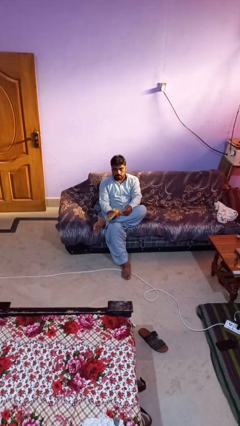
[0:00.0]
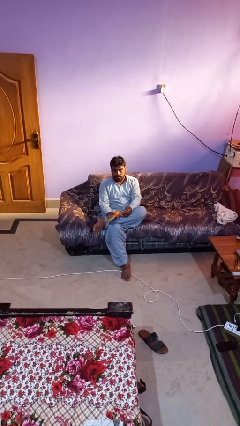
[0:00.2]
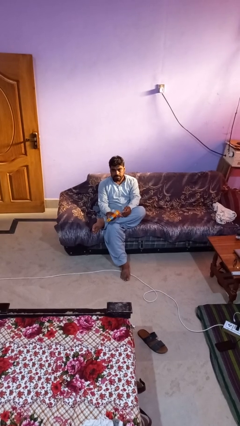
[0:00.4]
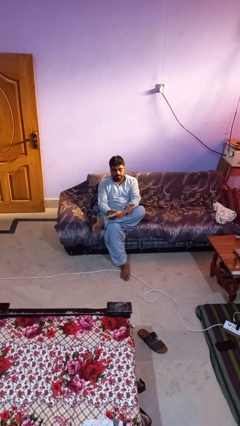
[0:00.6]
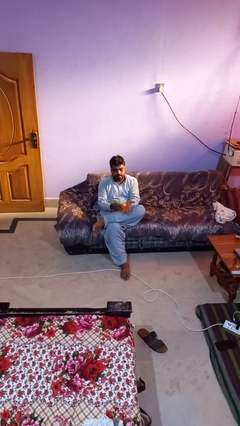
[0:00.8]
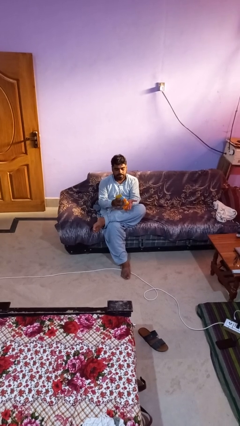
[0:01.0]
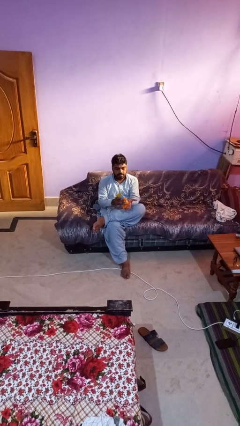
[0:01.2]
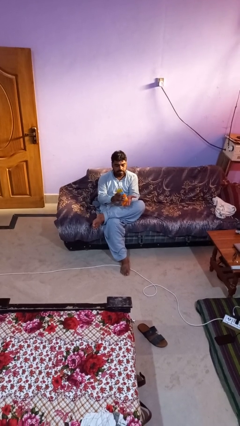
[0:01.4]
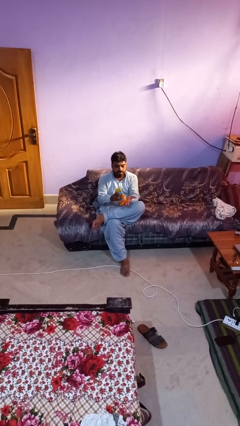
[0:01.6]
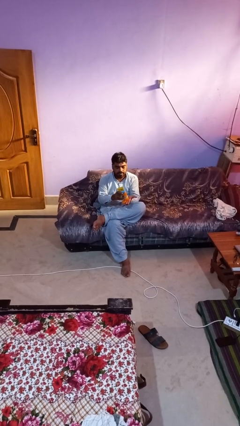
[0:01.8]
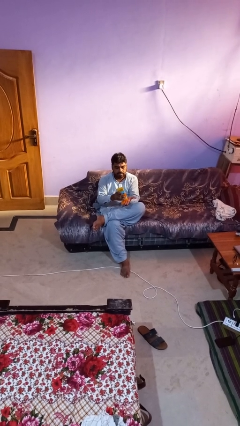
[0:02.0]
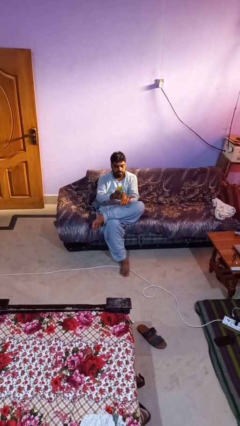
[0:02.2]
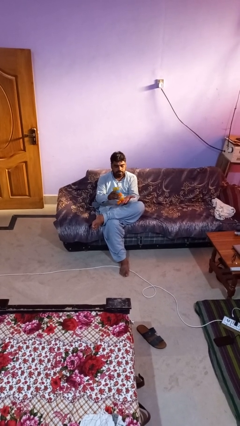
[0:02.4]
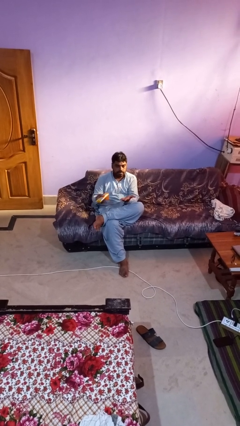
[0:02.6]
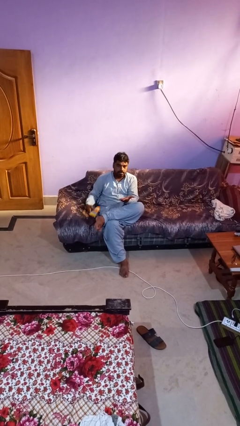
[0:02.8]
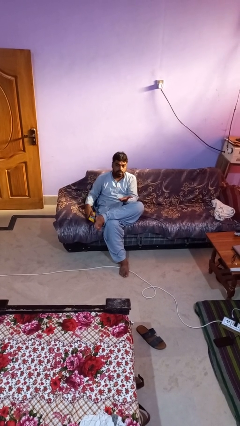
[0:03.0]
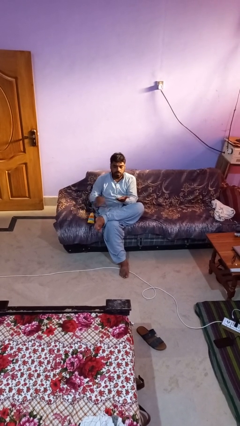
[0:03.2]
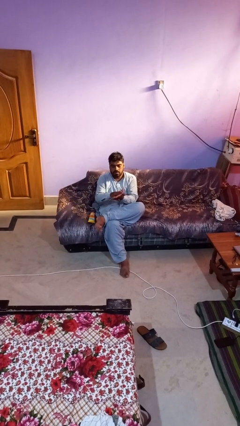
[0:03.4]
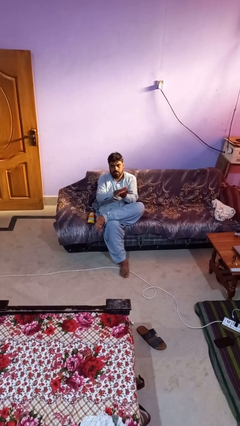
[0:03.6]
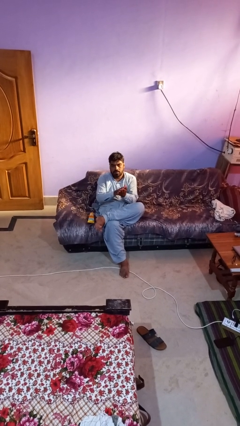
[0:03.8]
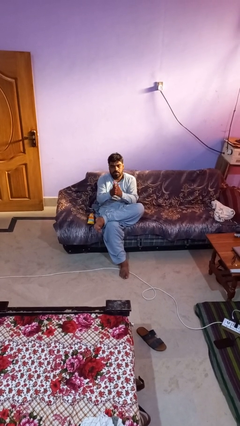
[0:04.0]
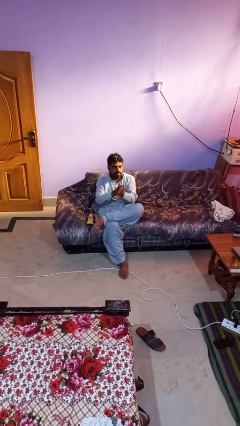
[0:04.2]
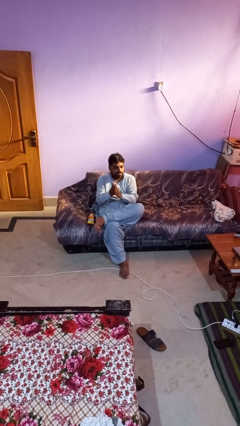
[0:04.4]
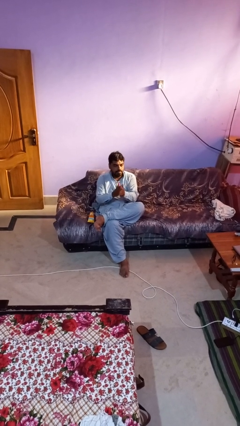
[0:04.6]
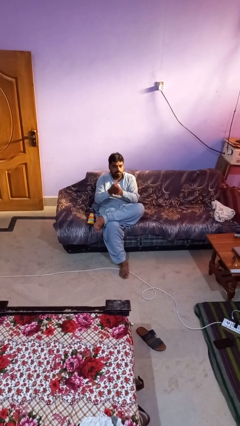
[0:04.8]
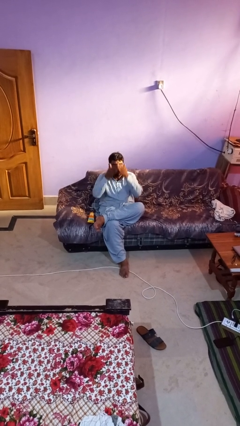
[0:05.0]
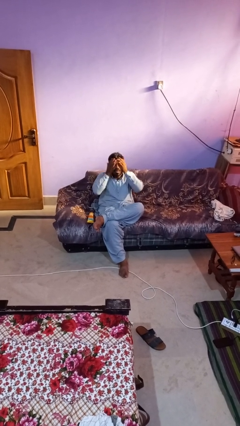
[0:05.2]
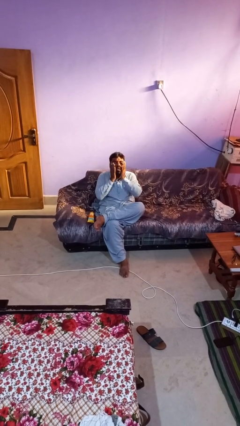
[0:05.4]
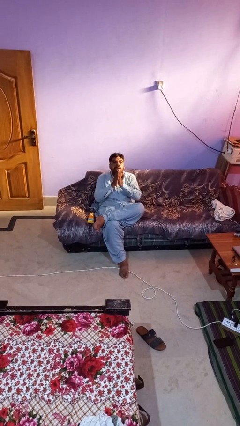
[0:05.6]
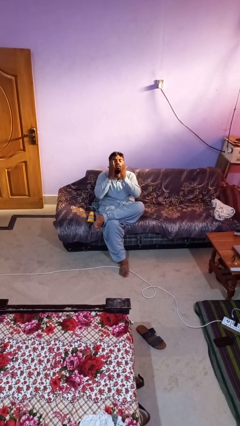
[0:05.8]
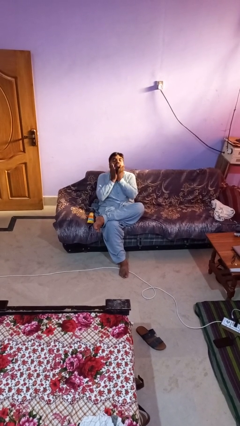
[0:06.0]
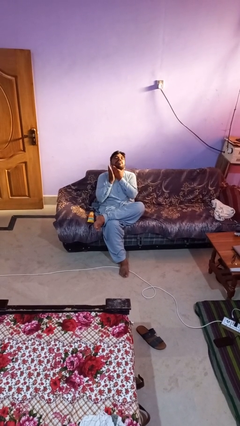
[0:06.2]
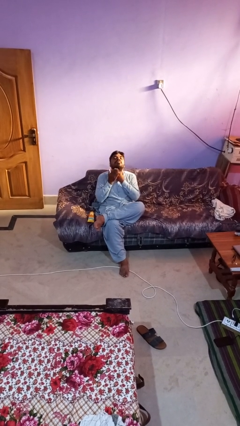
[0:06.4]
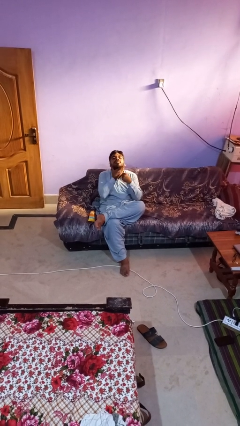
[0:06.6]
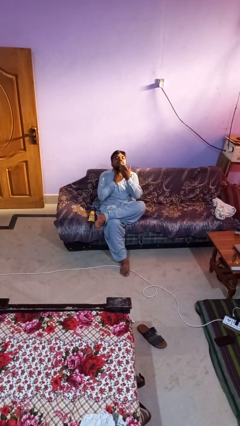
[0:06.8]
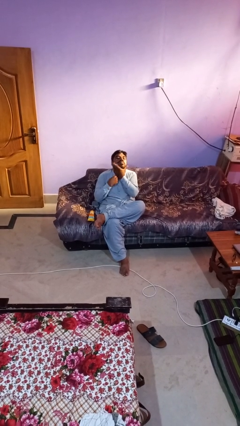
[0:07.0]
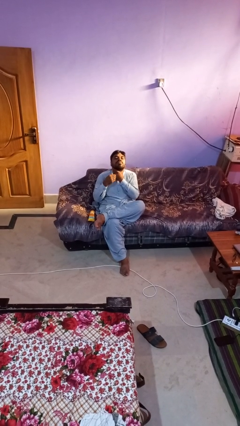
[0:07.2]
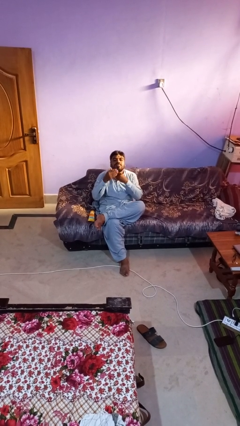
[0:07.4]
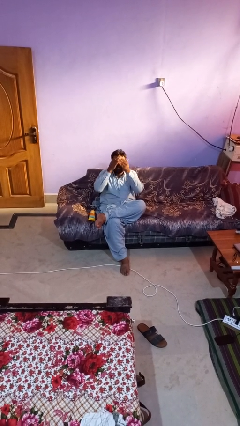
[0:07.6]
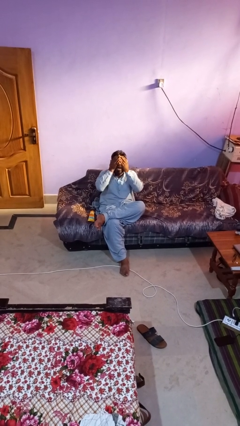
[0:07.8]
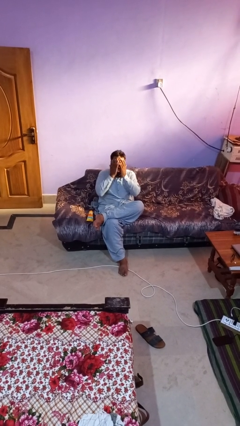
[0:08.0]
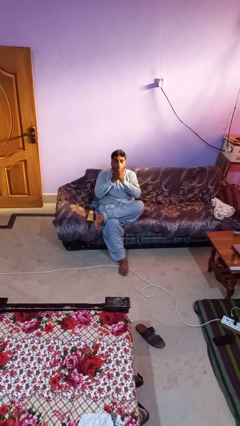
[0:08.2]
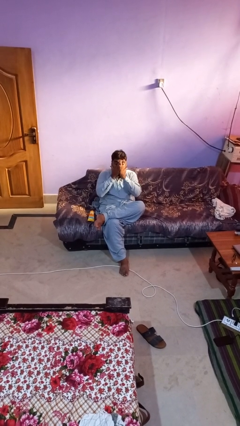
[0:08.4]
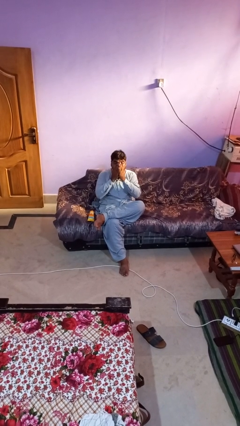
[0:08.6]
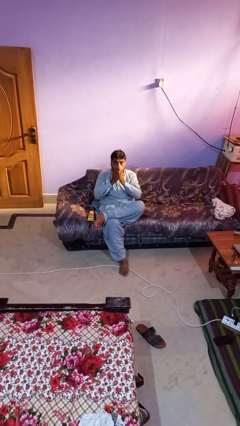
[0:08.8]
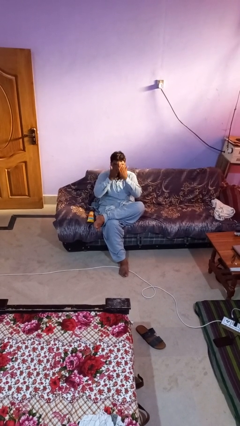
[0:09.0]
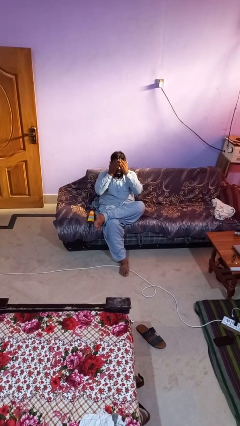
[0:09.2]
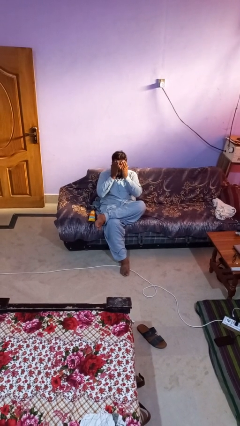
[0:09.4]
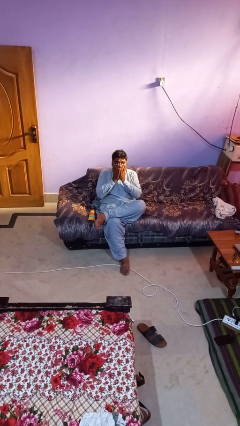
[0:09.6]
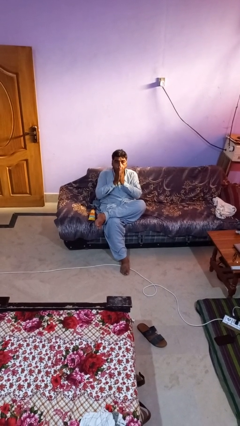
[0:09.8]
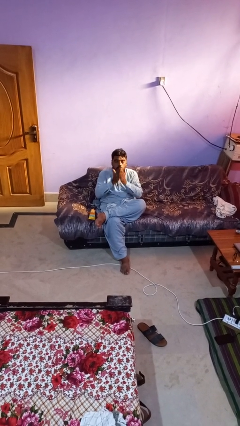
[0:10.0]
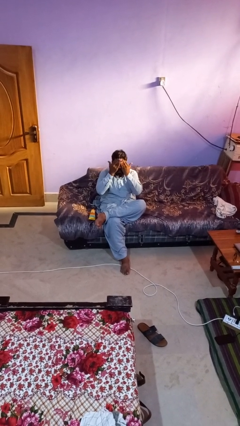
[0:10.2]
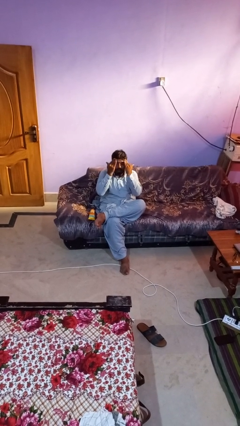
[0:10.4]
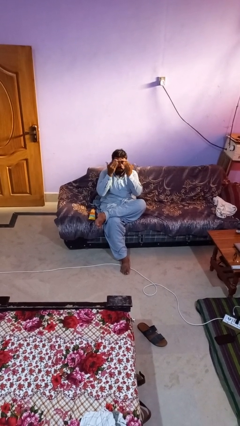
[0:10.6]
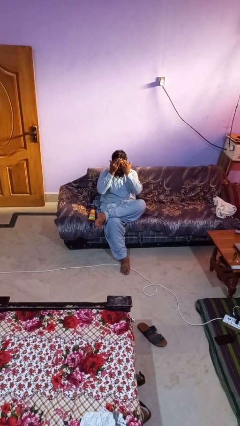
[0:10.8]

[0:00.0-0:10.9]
person applies facial moisturizer

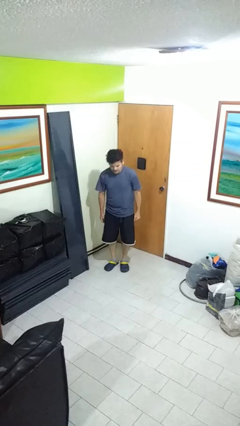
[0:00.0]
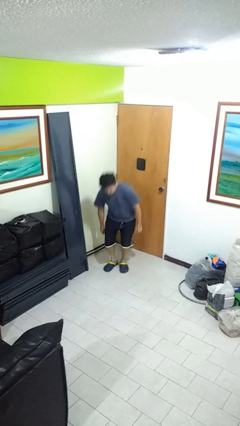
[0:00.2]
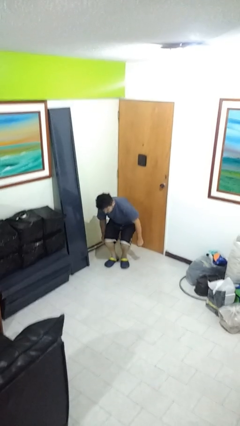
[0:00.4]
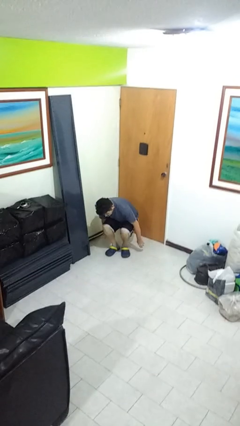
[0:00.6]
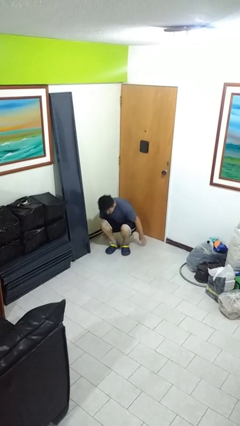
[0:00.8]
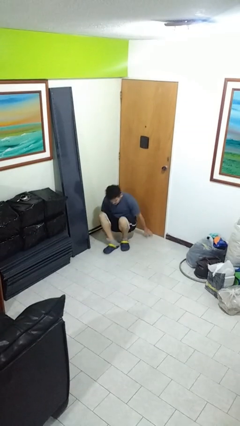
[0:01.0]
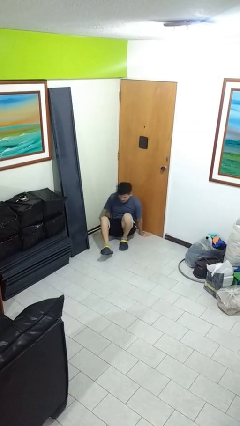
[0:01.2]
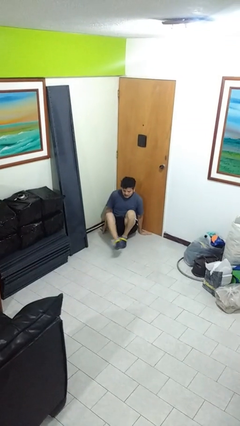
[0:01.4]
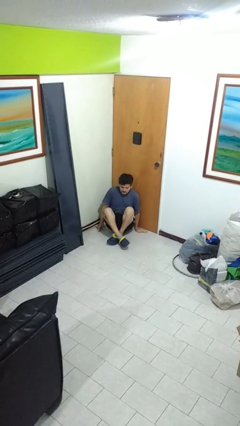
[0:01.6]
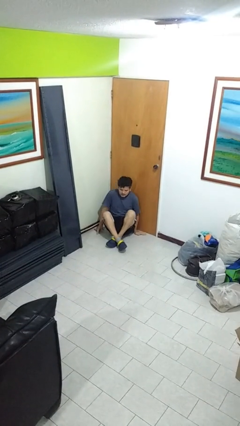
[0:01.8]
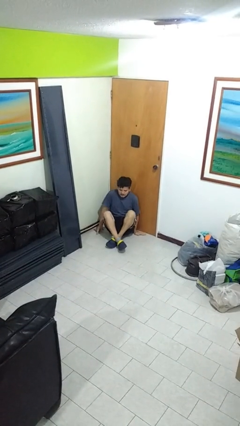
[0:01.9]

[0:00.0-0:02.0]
person sits crisscross

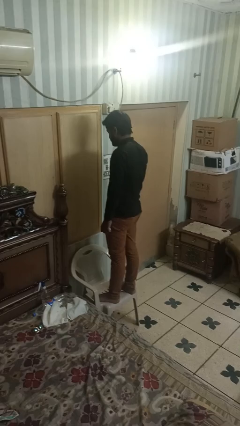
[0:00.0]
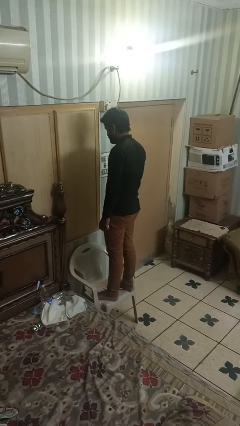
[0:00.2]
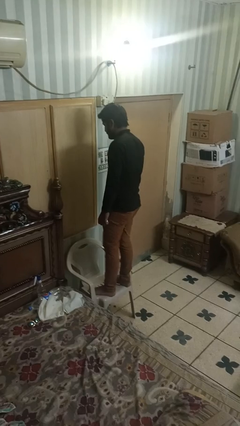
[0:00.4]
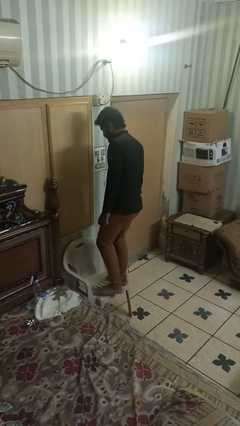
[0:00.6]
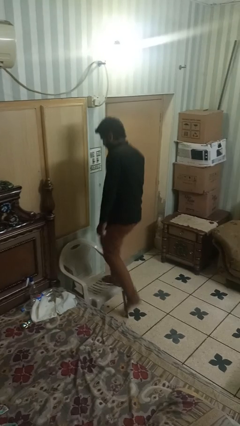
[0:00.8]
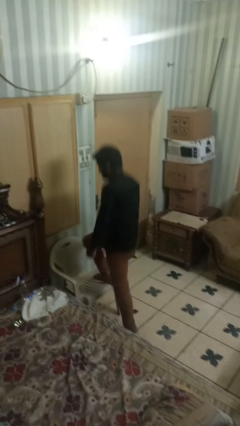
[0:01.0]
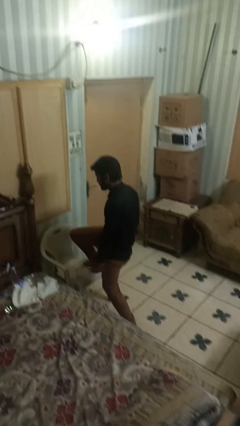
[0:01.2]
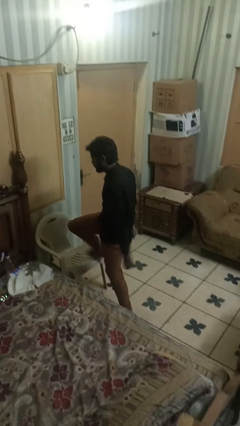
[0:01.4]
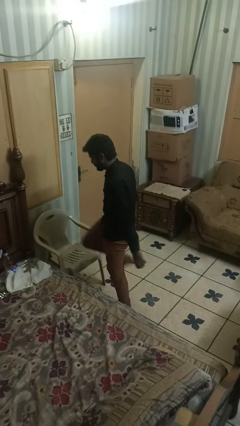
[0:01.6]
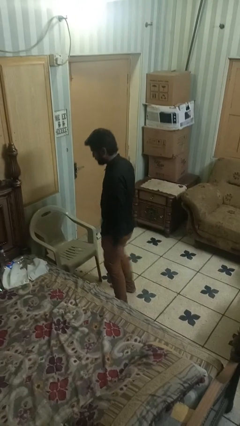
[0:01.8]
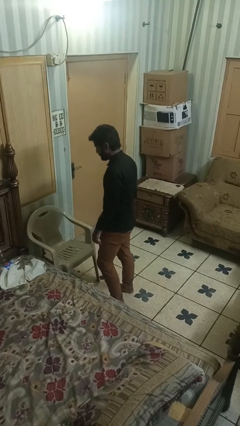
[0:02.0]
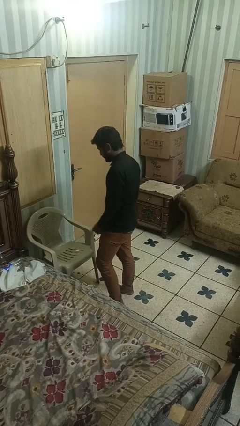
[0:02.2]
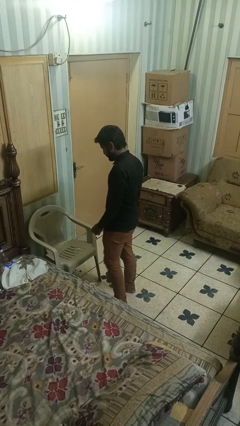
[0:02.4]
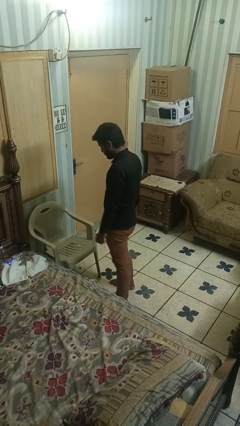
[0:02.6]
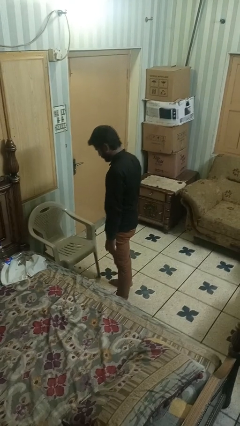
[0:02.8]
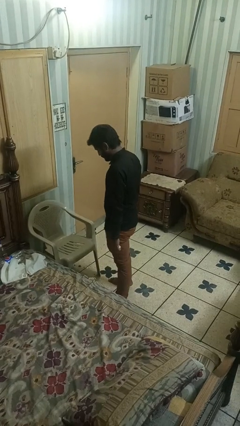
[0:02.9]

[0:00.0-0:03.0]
person climbs off chair

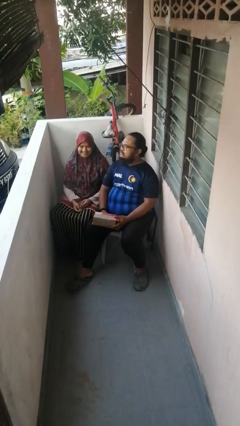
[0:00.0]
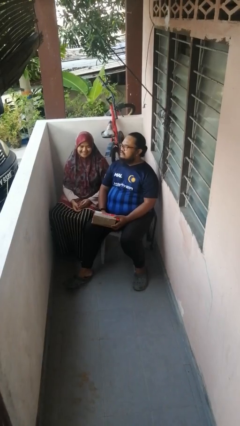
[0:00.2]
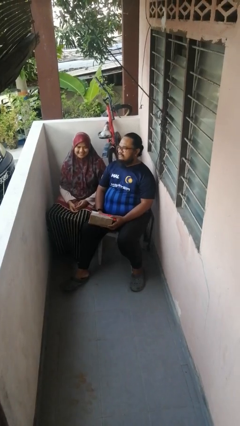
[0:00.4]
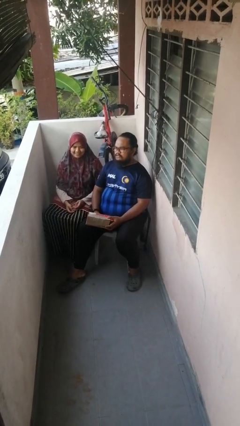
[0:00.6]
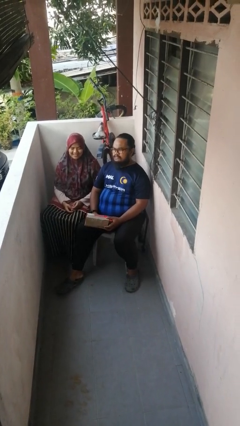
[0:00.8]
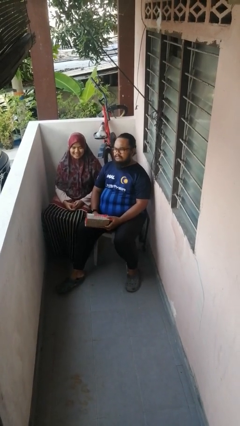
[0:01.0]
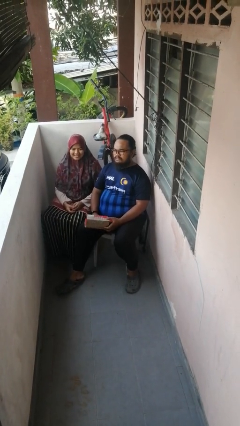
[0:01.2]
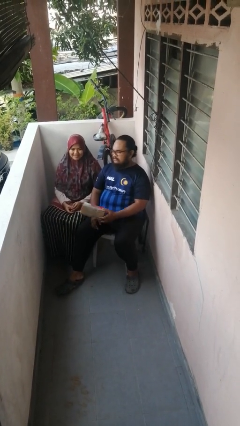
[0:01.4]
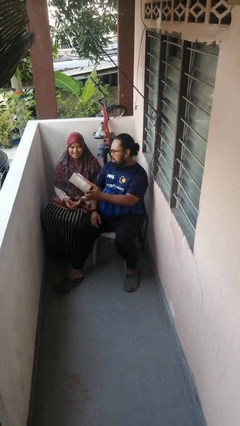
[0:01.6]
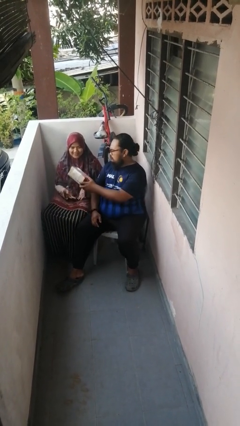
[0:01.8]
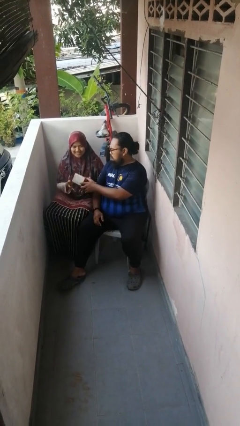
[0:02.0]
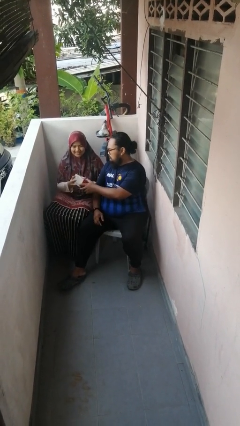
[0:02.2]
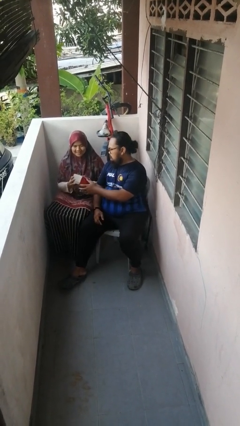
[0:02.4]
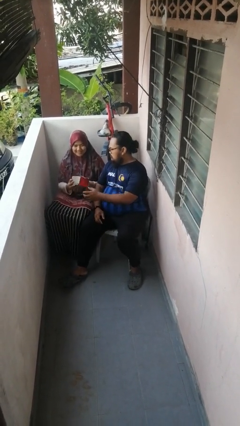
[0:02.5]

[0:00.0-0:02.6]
person transfers object to person
